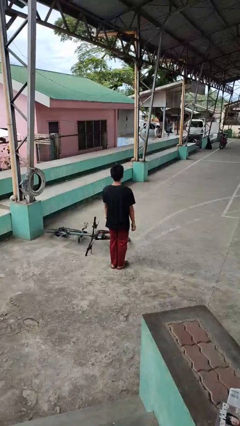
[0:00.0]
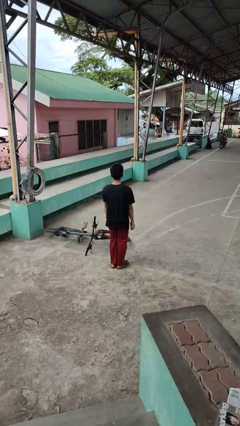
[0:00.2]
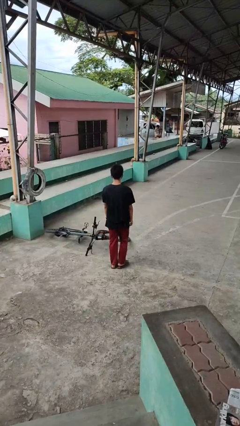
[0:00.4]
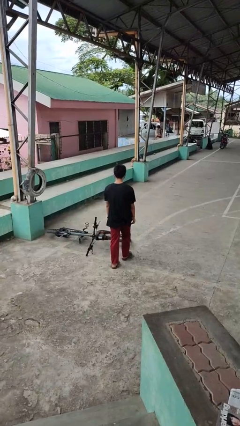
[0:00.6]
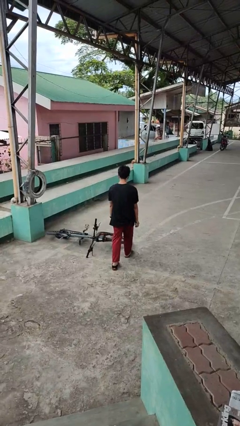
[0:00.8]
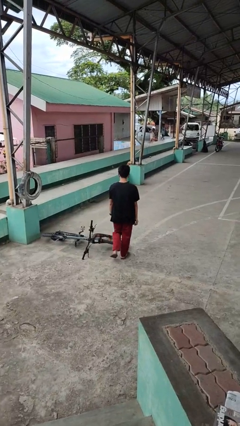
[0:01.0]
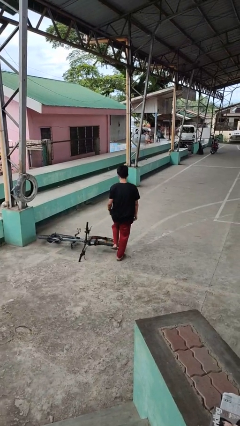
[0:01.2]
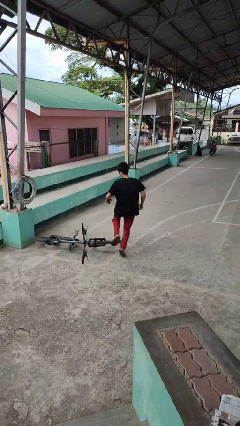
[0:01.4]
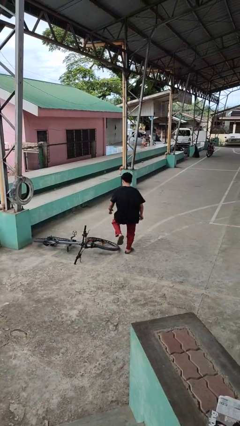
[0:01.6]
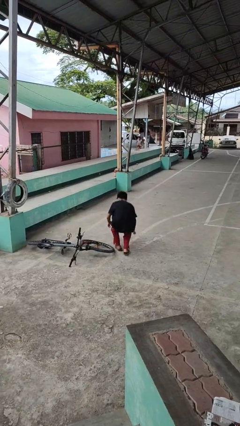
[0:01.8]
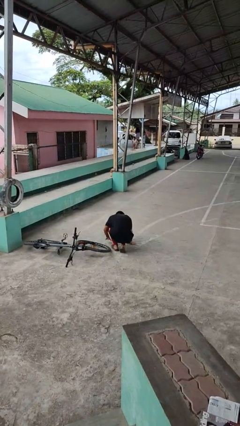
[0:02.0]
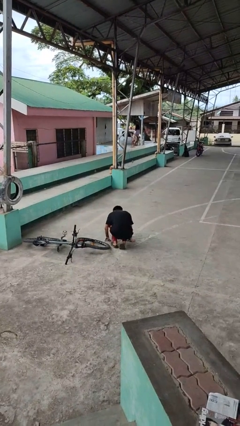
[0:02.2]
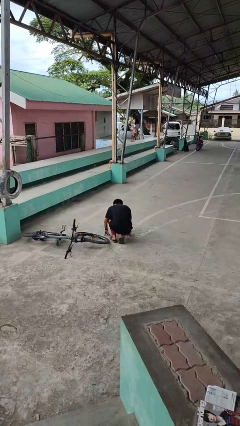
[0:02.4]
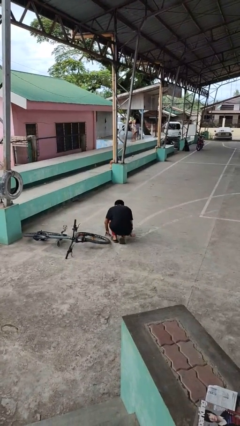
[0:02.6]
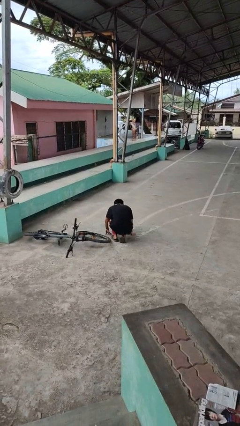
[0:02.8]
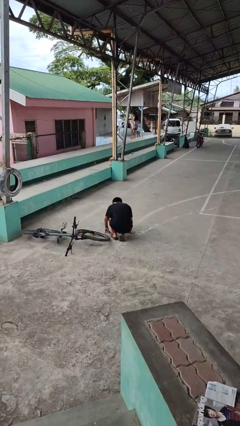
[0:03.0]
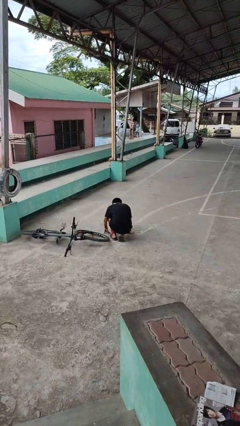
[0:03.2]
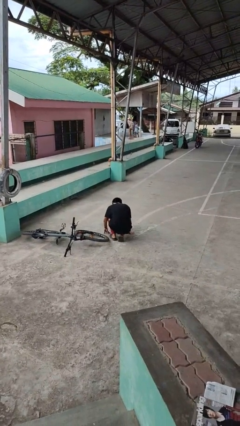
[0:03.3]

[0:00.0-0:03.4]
person trips on object on floor

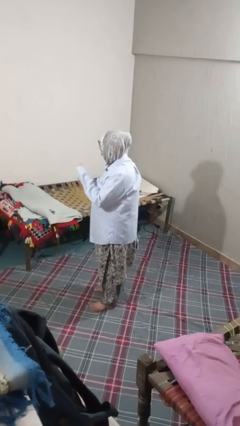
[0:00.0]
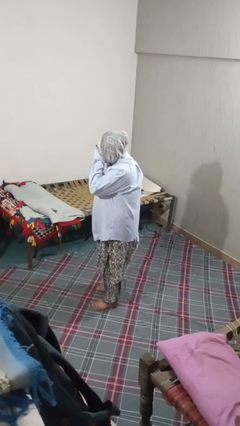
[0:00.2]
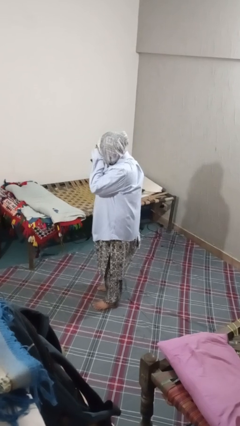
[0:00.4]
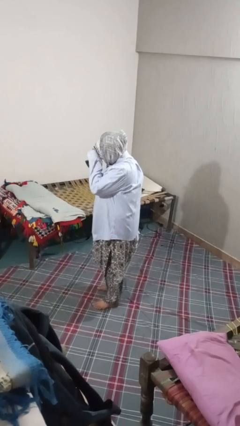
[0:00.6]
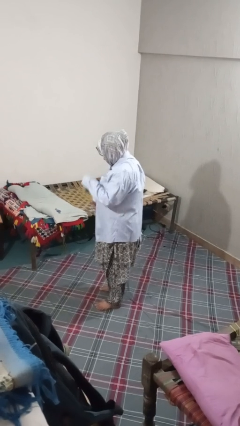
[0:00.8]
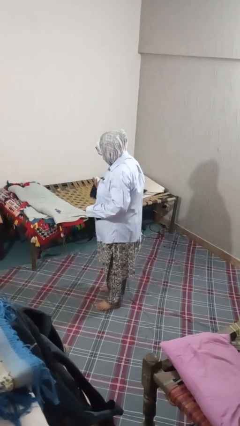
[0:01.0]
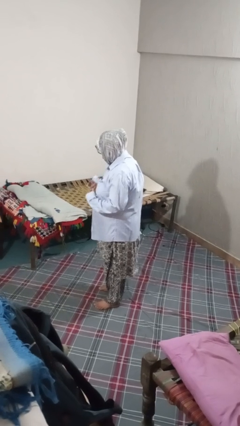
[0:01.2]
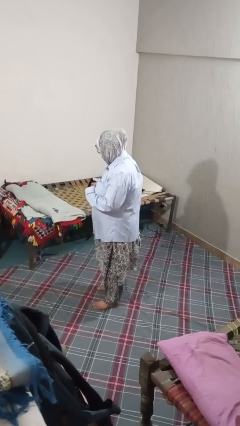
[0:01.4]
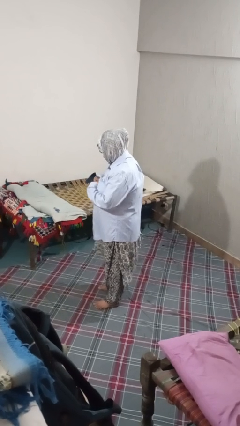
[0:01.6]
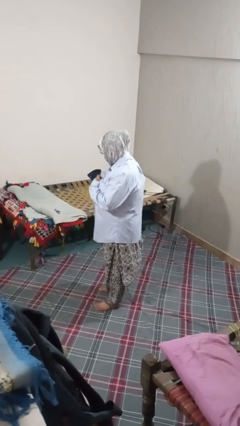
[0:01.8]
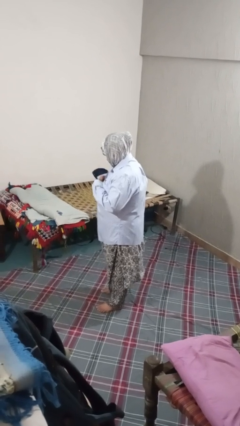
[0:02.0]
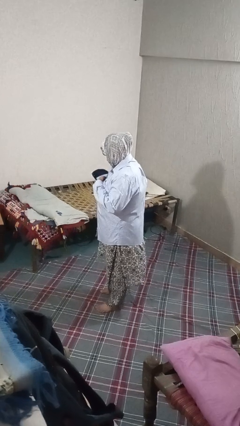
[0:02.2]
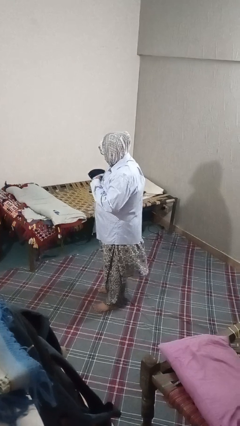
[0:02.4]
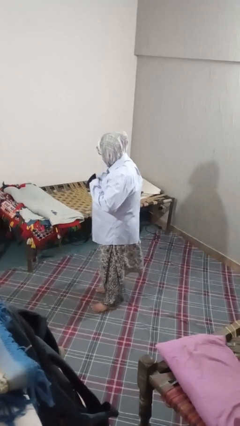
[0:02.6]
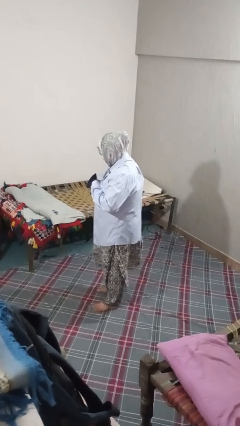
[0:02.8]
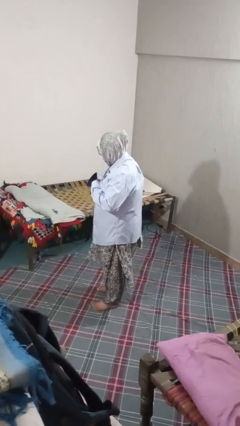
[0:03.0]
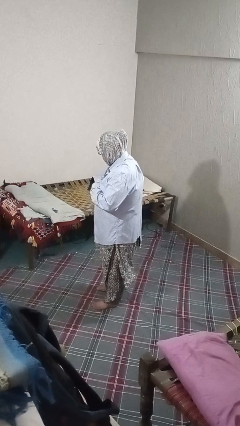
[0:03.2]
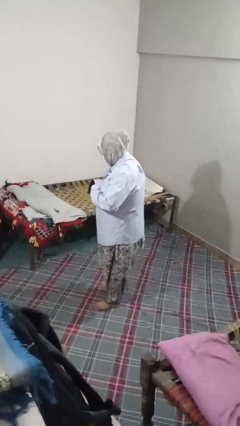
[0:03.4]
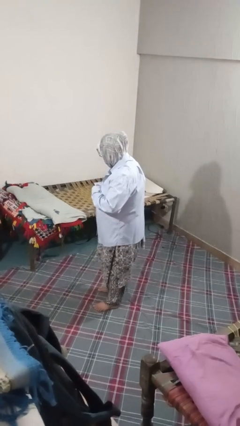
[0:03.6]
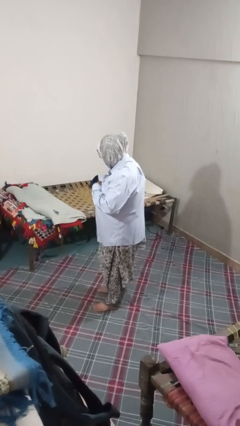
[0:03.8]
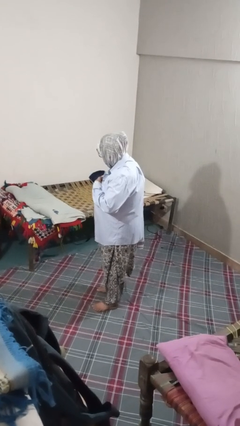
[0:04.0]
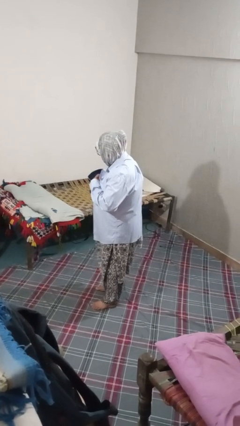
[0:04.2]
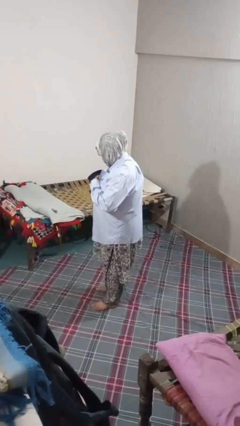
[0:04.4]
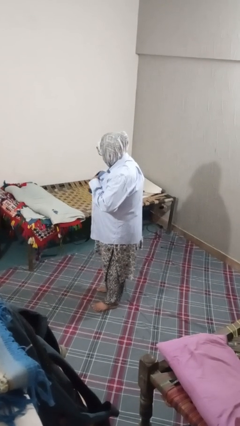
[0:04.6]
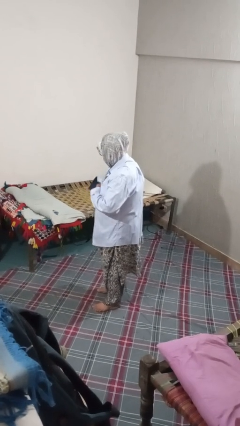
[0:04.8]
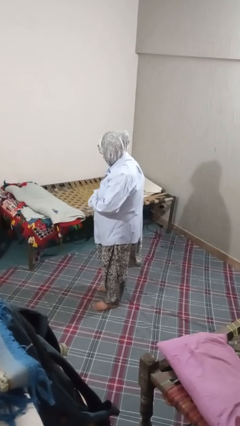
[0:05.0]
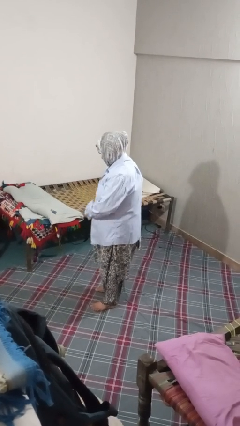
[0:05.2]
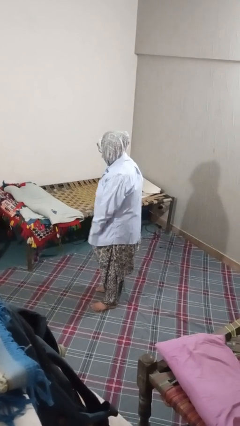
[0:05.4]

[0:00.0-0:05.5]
person unbuttons shirt

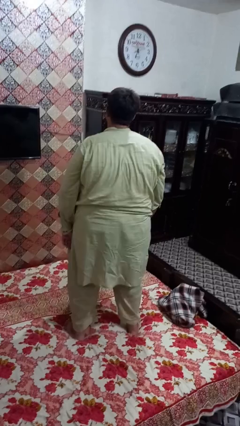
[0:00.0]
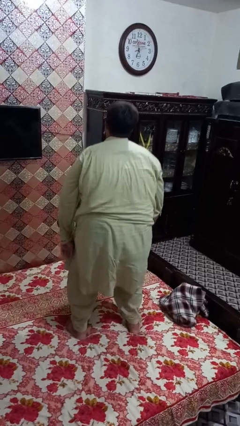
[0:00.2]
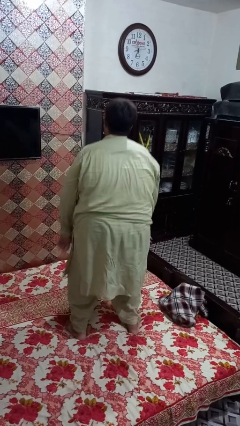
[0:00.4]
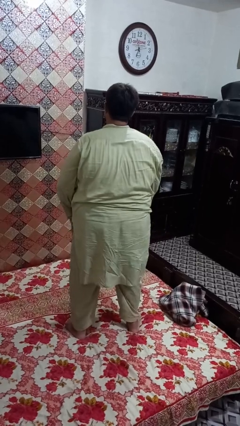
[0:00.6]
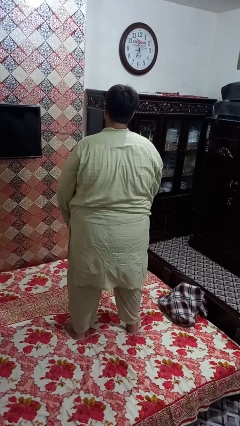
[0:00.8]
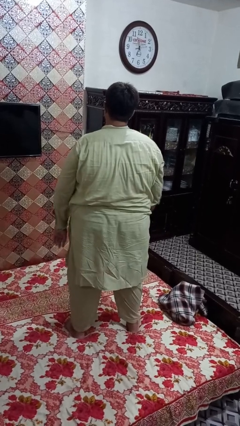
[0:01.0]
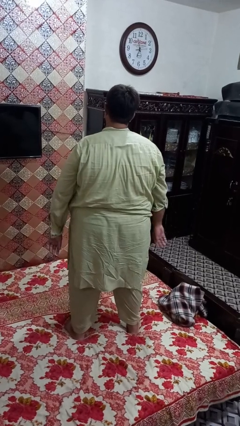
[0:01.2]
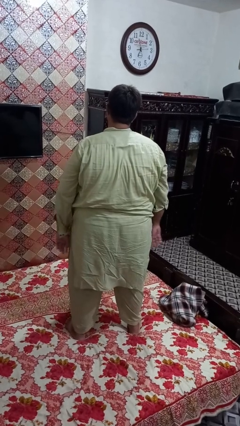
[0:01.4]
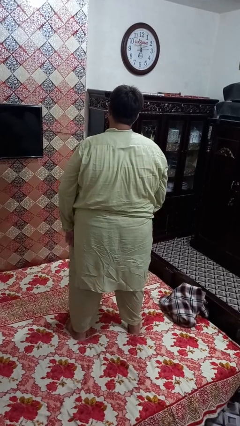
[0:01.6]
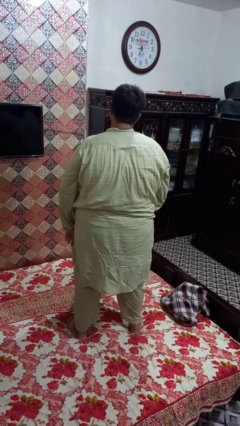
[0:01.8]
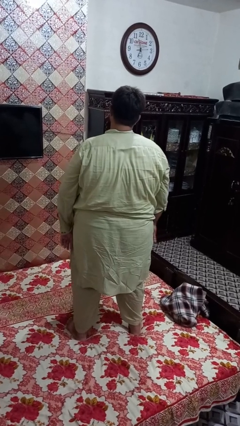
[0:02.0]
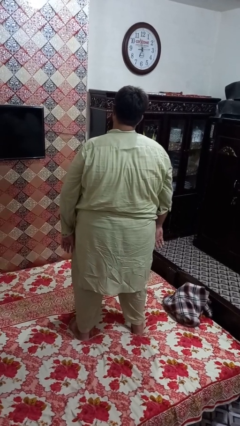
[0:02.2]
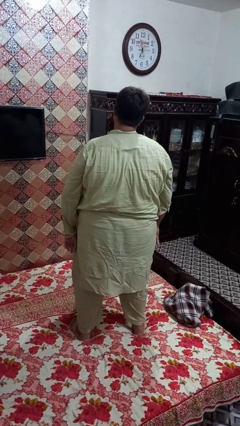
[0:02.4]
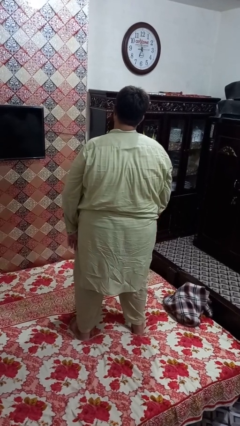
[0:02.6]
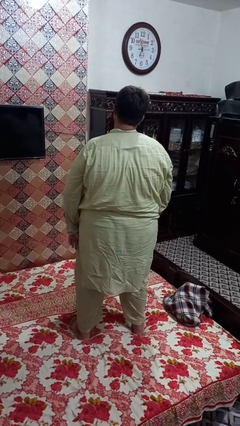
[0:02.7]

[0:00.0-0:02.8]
person jumps on bed

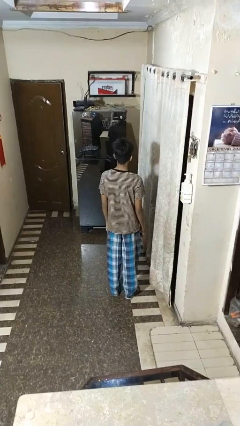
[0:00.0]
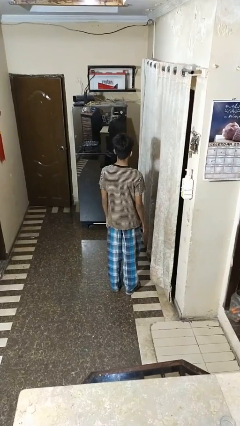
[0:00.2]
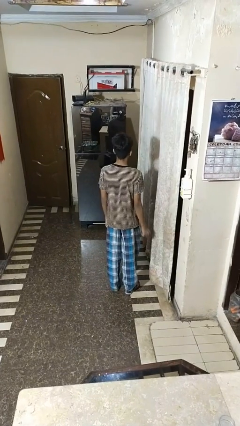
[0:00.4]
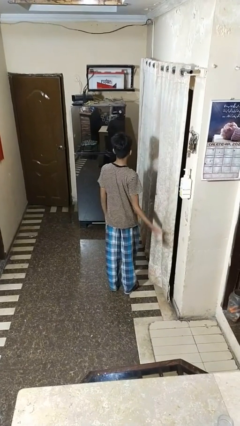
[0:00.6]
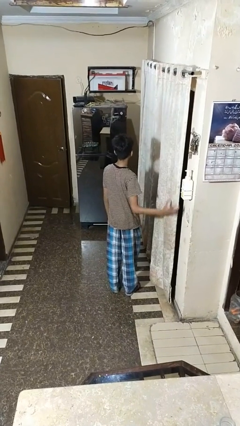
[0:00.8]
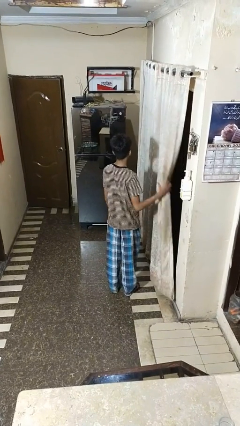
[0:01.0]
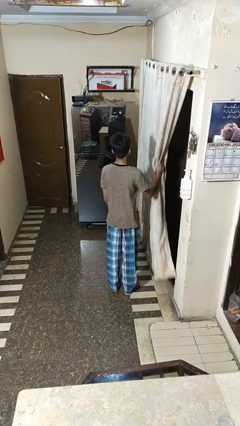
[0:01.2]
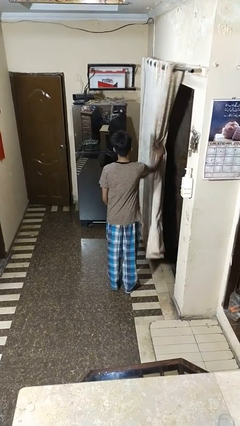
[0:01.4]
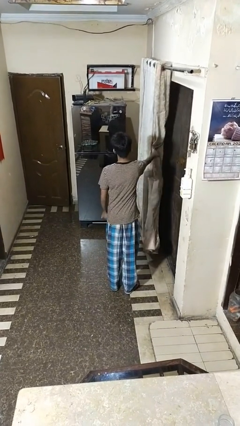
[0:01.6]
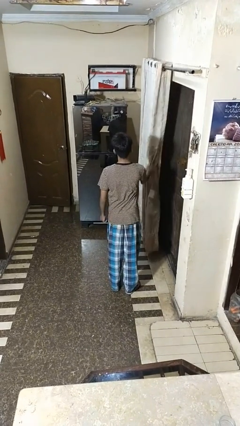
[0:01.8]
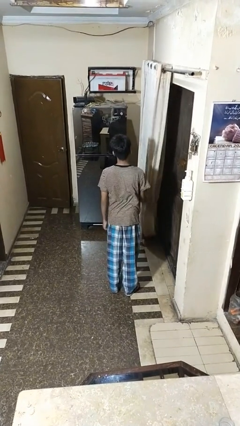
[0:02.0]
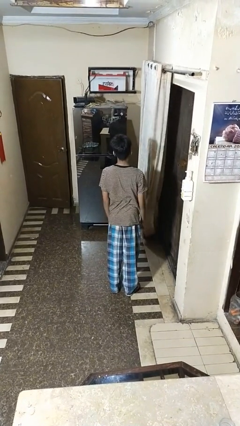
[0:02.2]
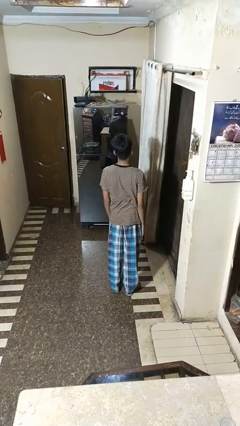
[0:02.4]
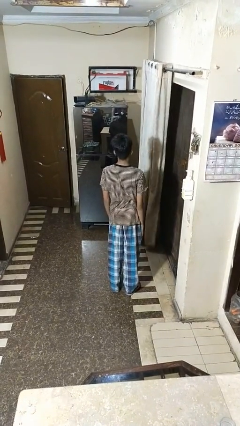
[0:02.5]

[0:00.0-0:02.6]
person opens curtains

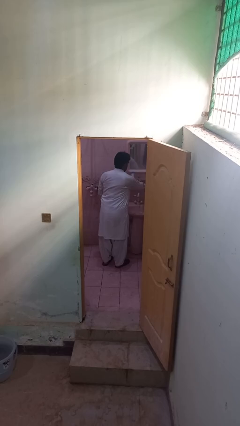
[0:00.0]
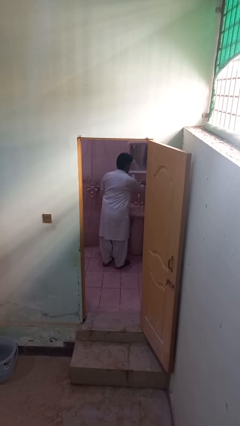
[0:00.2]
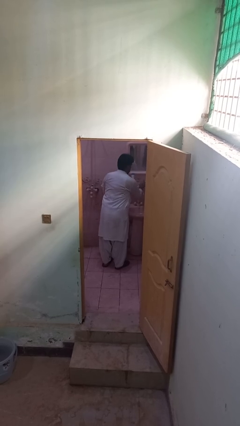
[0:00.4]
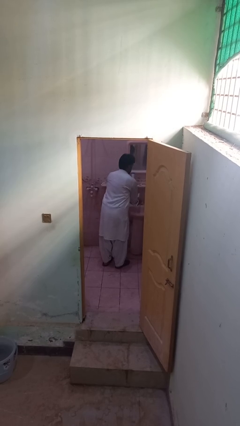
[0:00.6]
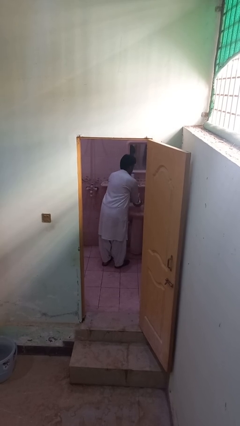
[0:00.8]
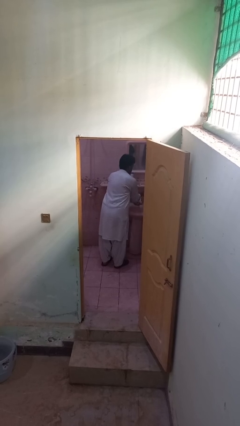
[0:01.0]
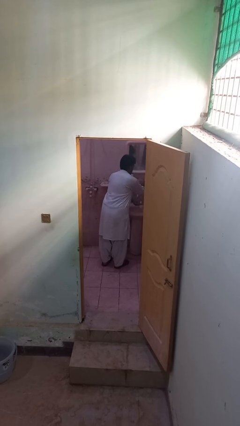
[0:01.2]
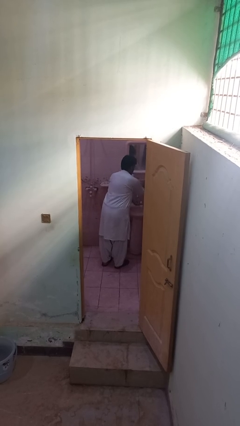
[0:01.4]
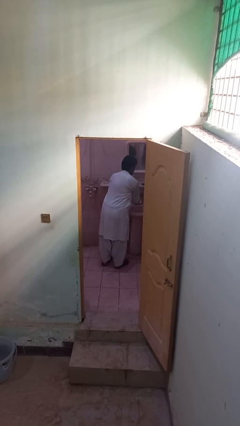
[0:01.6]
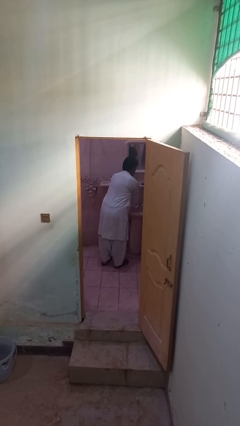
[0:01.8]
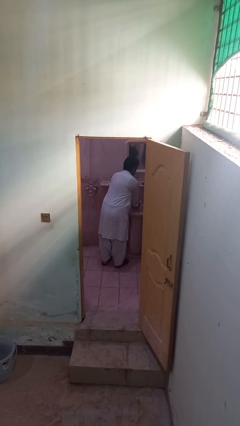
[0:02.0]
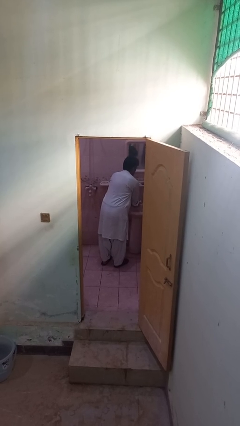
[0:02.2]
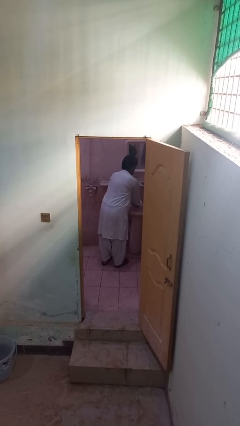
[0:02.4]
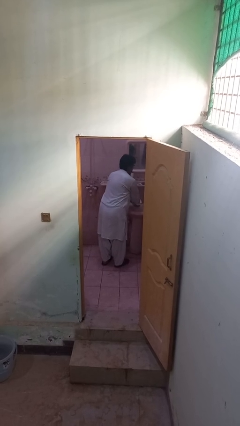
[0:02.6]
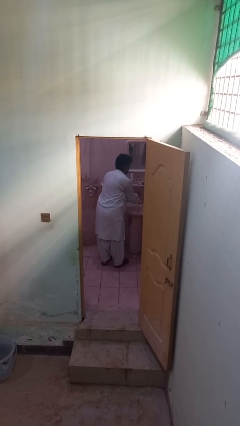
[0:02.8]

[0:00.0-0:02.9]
person washes hands
